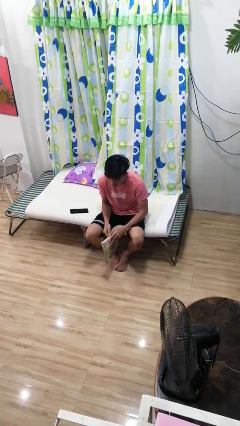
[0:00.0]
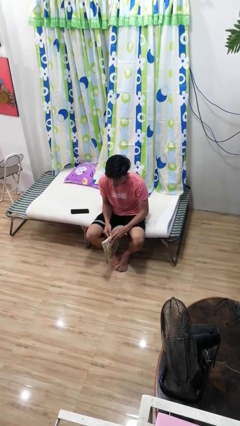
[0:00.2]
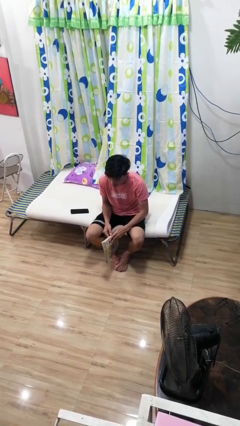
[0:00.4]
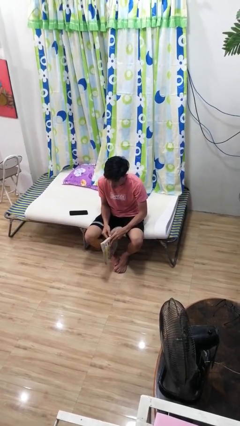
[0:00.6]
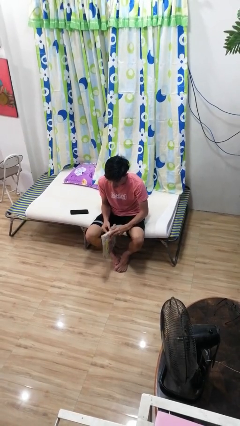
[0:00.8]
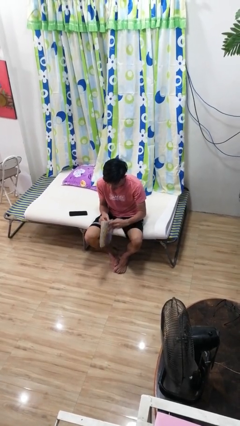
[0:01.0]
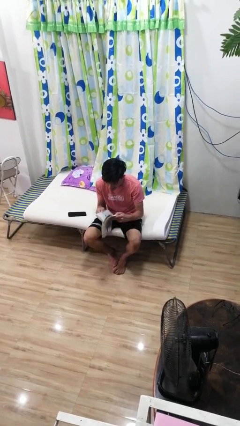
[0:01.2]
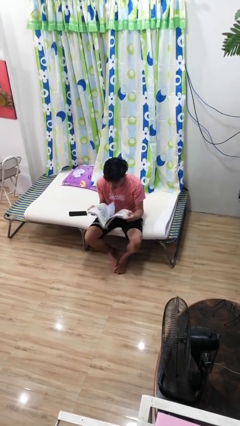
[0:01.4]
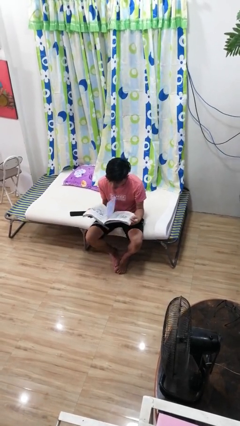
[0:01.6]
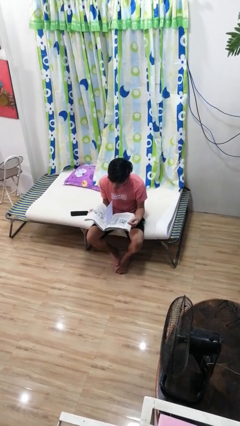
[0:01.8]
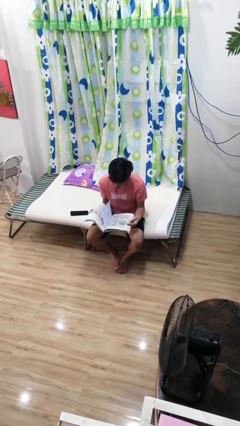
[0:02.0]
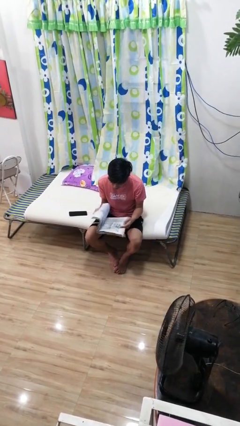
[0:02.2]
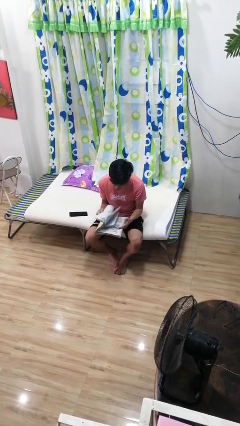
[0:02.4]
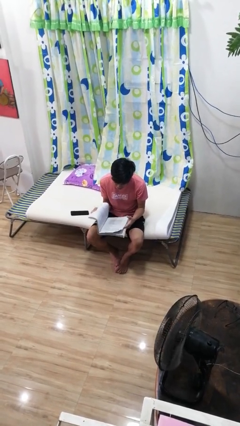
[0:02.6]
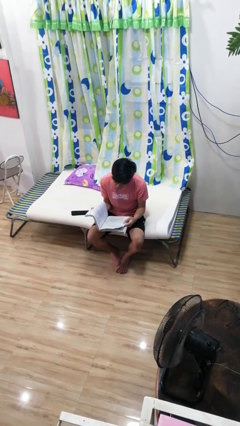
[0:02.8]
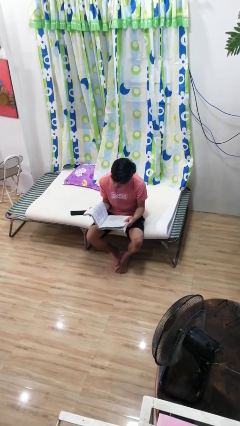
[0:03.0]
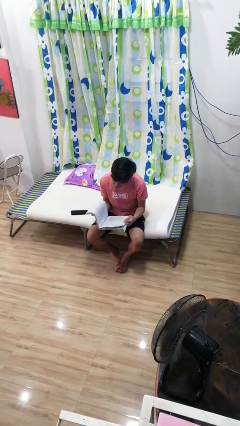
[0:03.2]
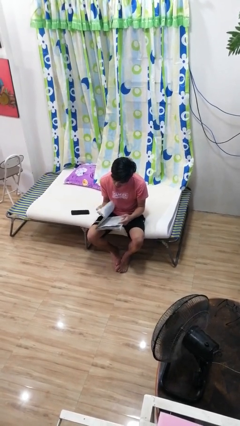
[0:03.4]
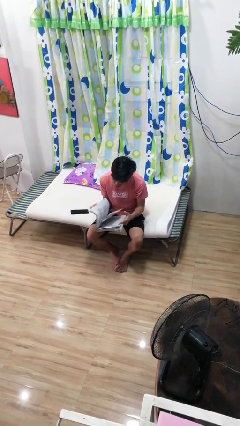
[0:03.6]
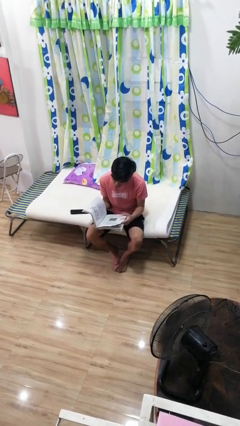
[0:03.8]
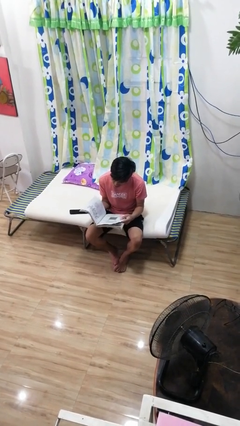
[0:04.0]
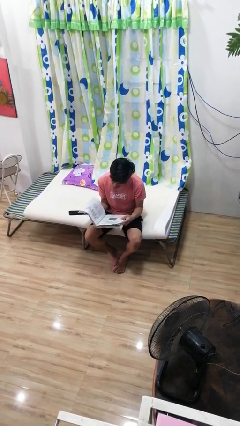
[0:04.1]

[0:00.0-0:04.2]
person reads book

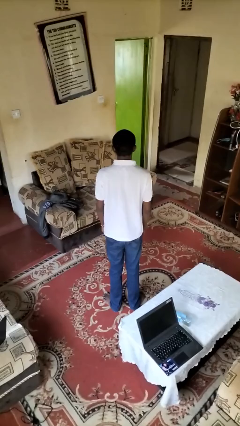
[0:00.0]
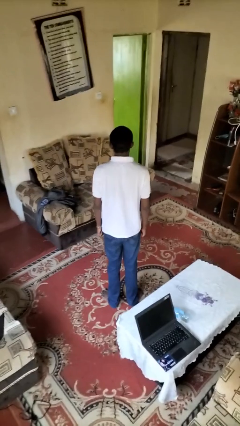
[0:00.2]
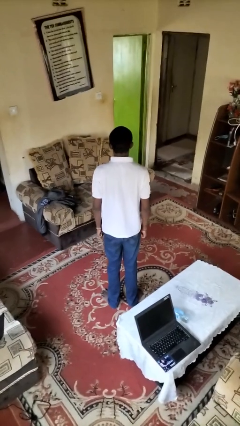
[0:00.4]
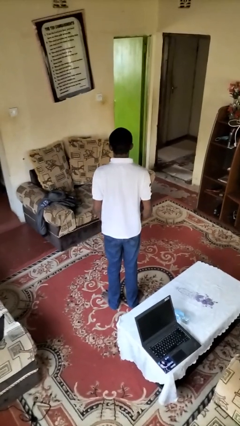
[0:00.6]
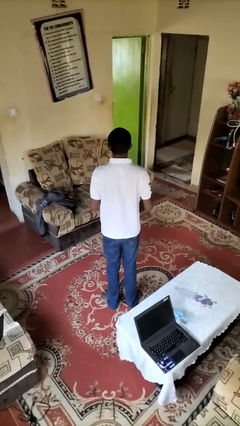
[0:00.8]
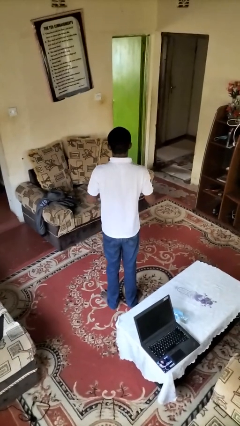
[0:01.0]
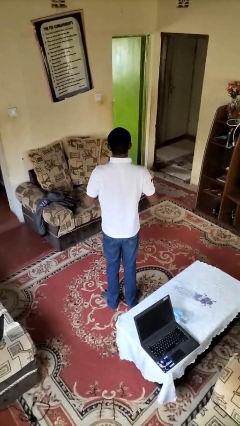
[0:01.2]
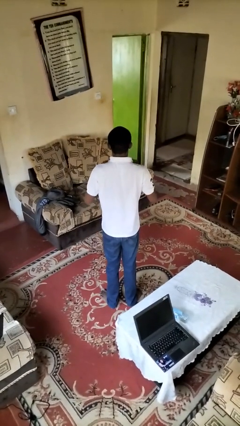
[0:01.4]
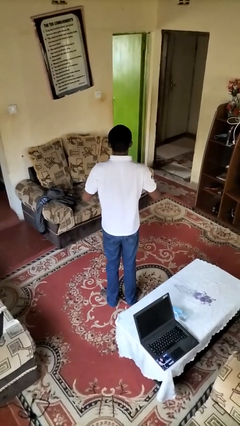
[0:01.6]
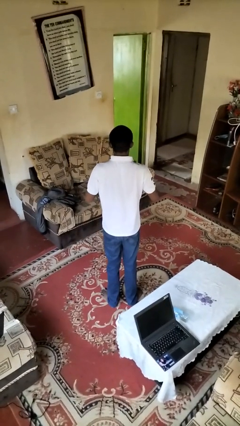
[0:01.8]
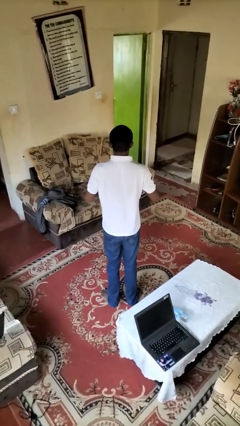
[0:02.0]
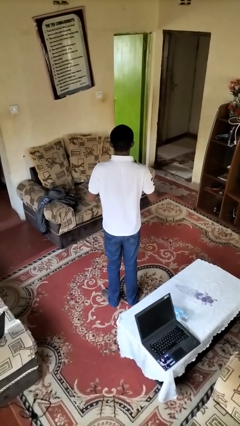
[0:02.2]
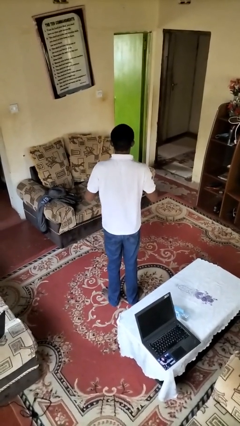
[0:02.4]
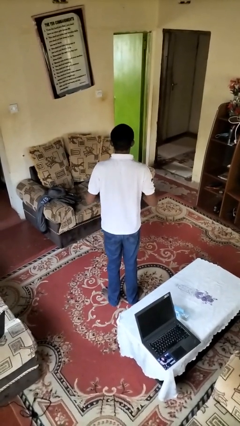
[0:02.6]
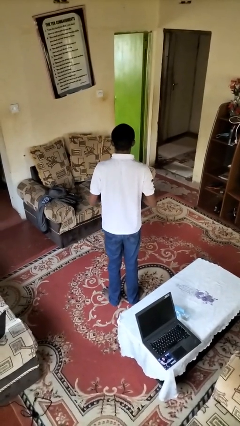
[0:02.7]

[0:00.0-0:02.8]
person drums on chest

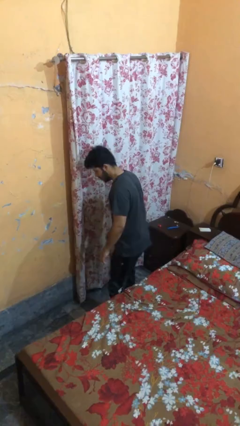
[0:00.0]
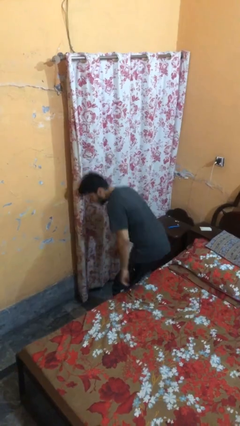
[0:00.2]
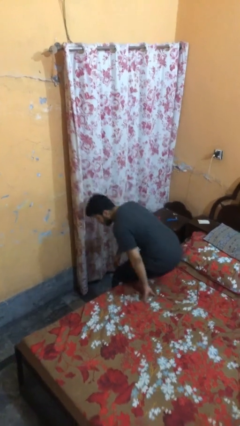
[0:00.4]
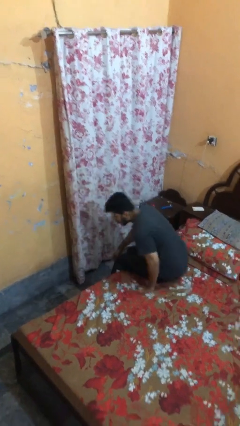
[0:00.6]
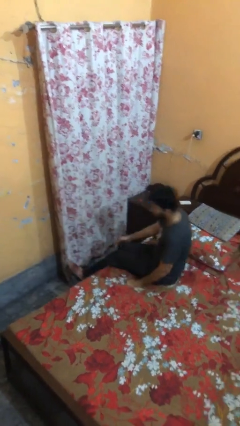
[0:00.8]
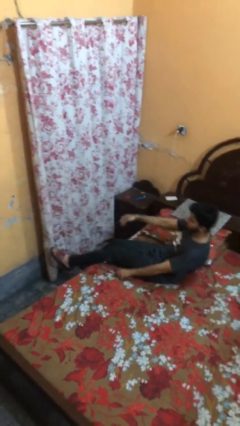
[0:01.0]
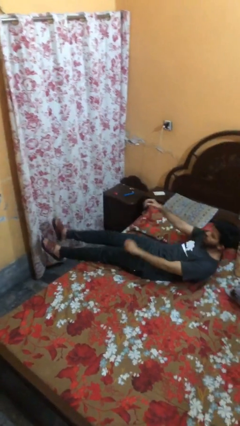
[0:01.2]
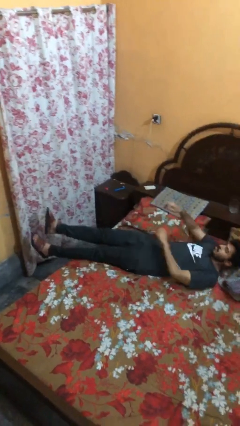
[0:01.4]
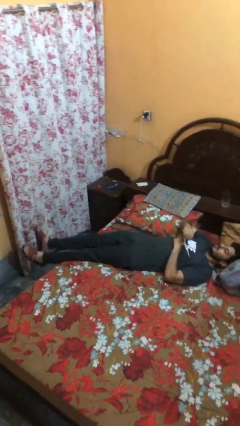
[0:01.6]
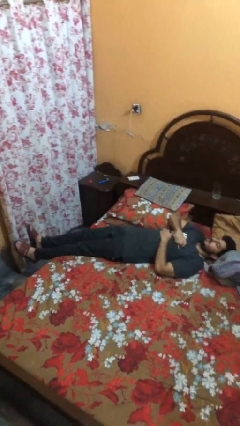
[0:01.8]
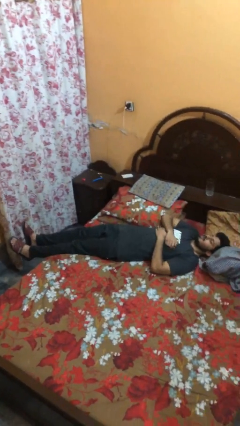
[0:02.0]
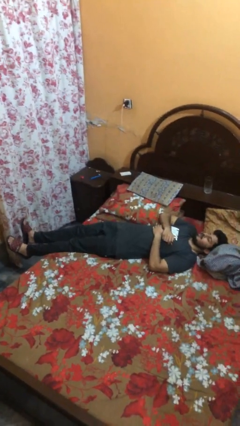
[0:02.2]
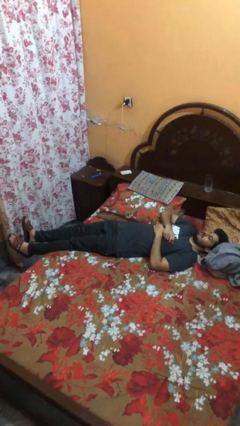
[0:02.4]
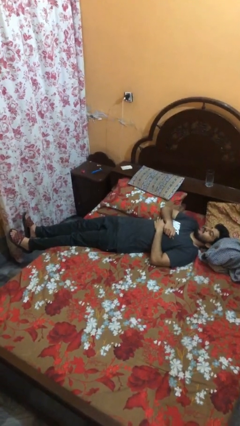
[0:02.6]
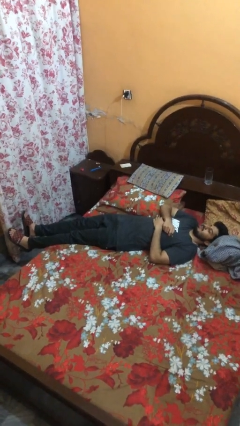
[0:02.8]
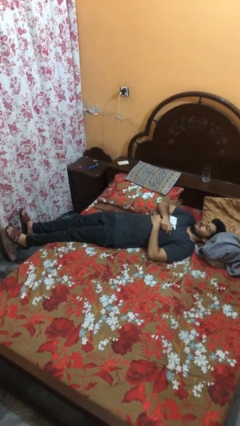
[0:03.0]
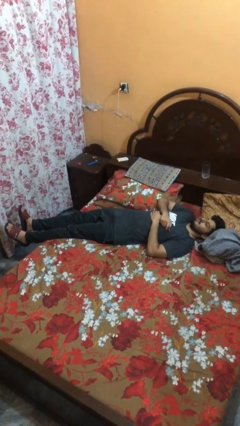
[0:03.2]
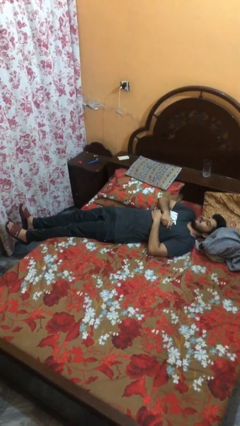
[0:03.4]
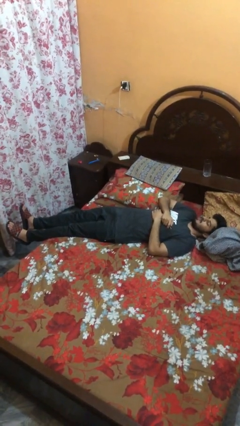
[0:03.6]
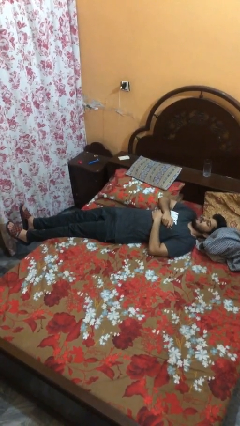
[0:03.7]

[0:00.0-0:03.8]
person lies down on bed

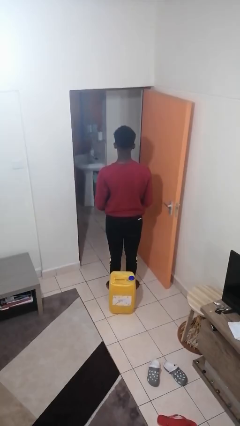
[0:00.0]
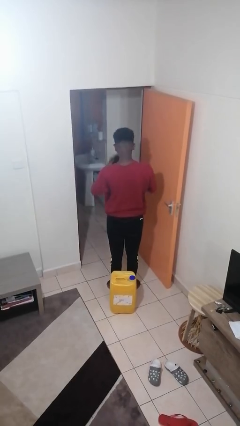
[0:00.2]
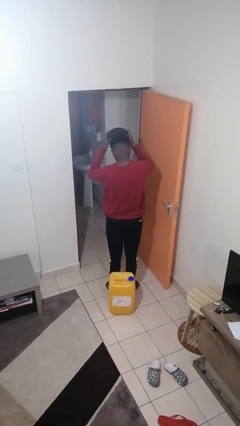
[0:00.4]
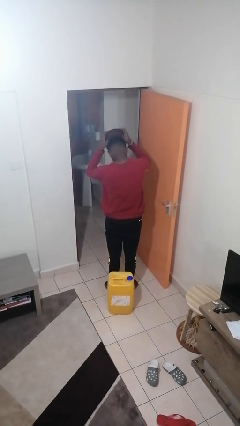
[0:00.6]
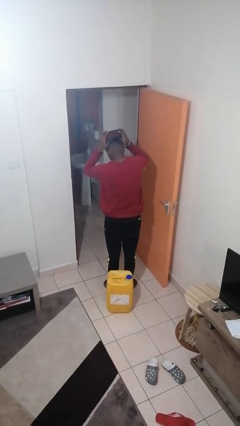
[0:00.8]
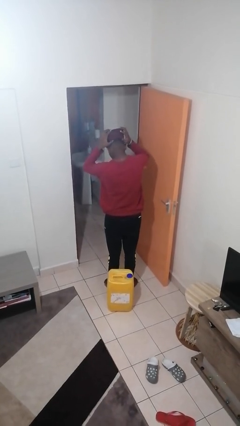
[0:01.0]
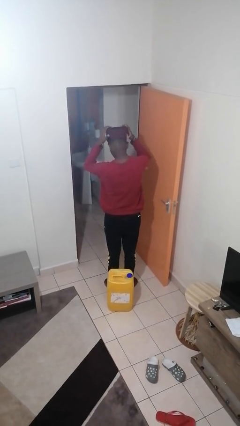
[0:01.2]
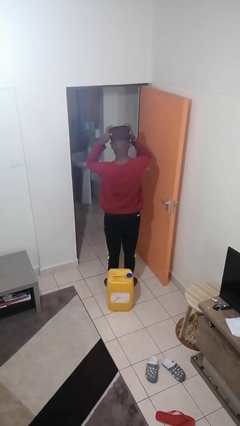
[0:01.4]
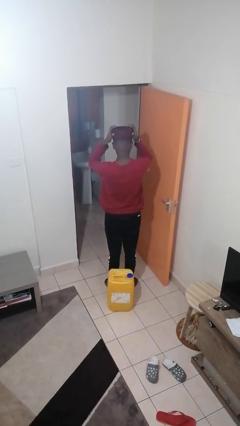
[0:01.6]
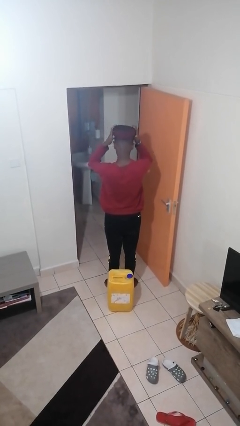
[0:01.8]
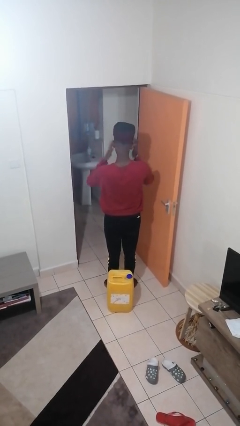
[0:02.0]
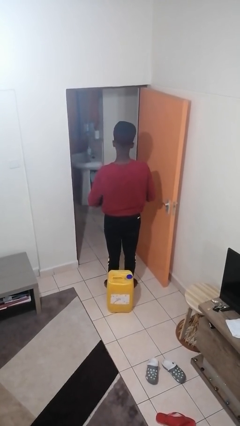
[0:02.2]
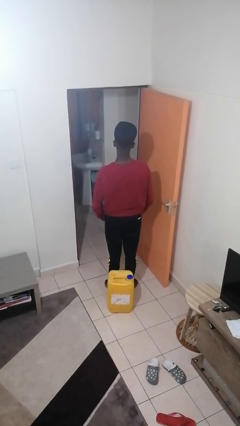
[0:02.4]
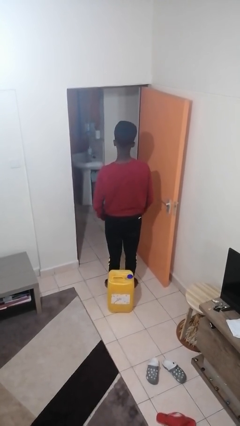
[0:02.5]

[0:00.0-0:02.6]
person puts on hat

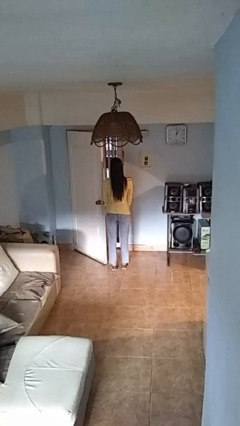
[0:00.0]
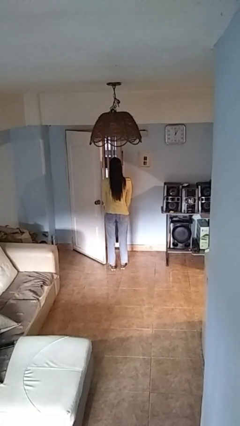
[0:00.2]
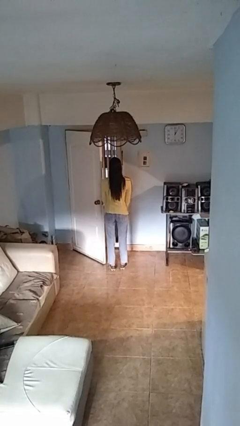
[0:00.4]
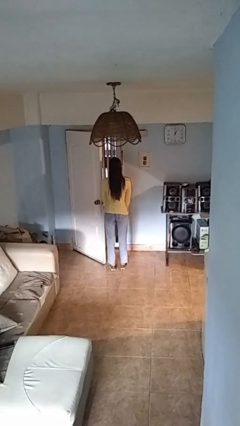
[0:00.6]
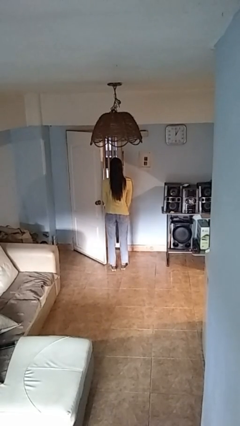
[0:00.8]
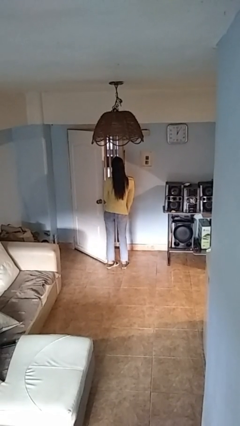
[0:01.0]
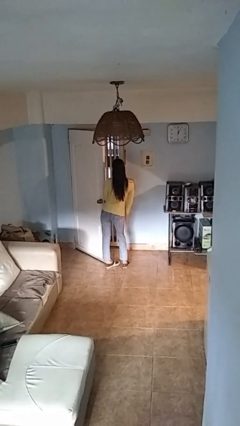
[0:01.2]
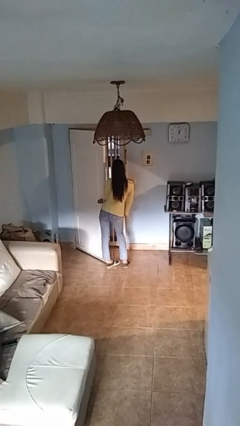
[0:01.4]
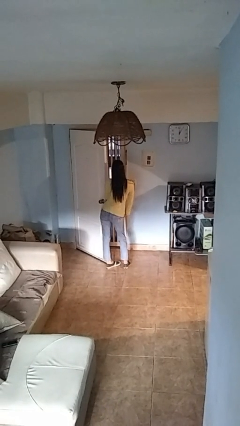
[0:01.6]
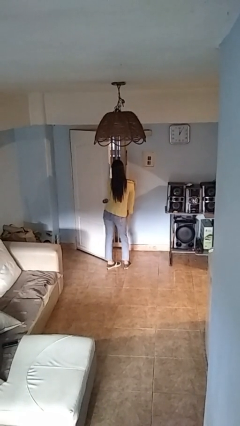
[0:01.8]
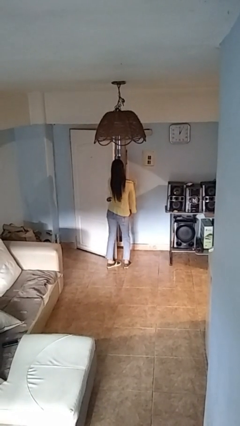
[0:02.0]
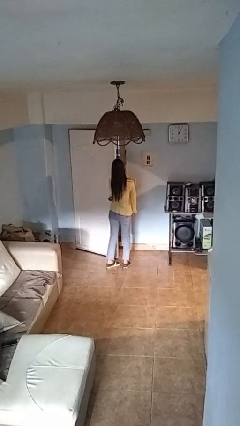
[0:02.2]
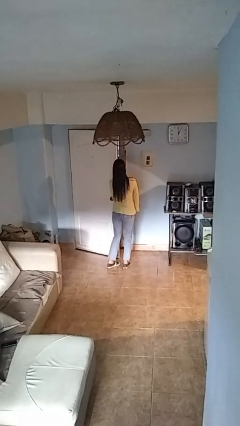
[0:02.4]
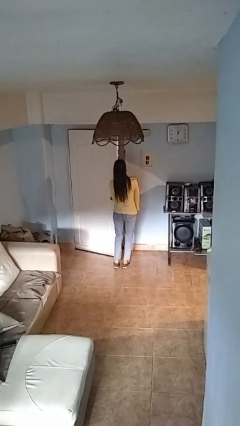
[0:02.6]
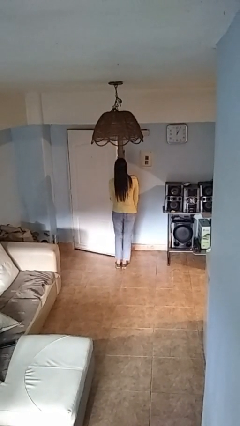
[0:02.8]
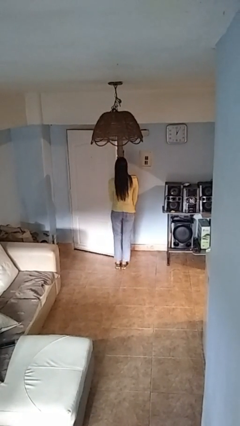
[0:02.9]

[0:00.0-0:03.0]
person closes door with hip

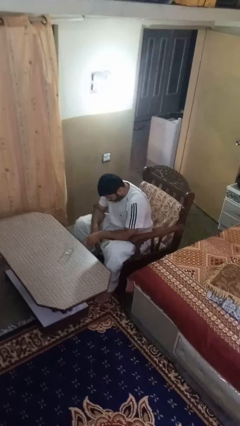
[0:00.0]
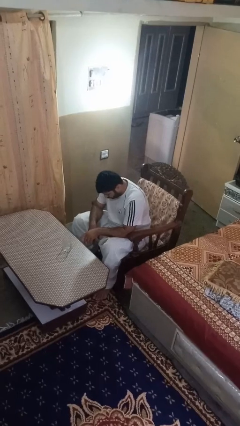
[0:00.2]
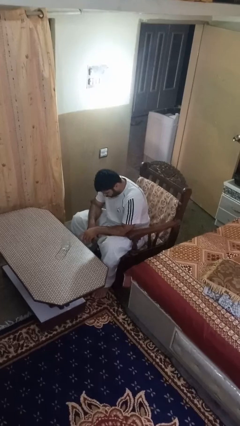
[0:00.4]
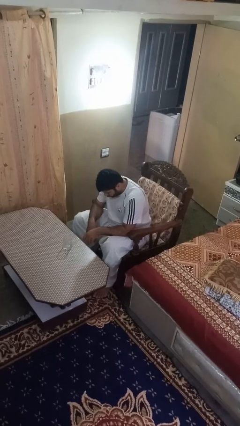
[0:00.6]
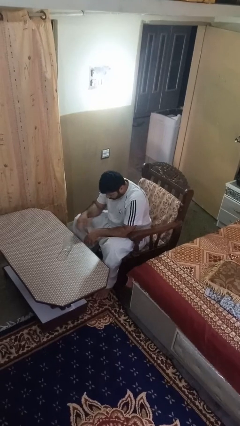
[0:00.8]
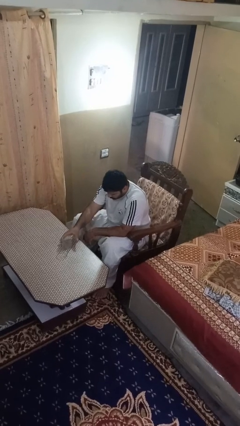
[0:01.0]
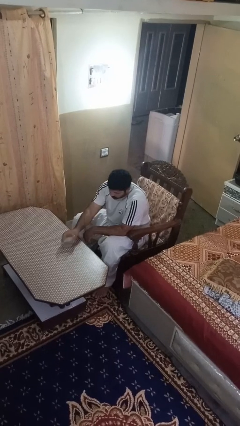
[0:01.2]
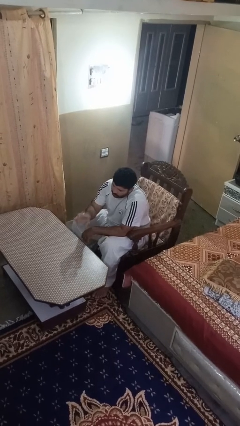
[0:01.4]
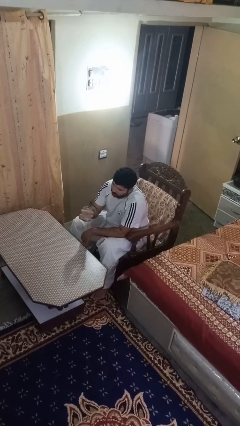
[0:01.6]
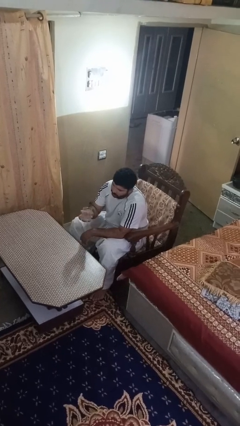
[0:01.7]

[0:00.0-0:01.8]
person picks up object from table
